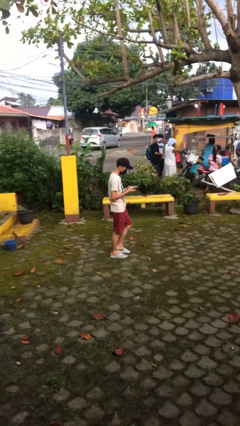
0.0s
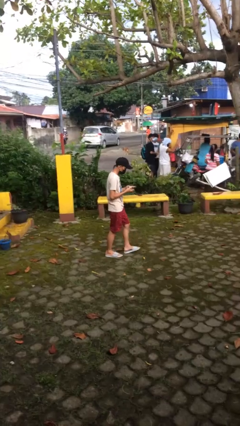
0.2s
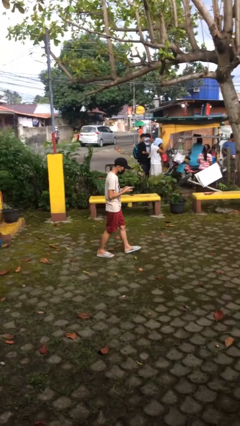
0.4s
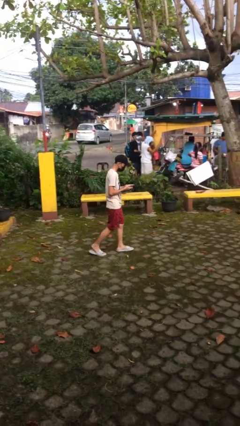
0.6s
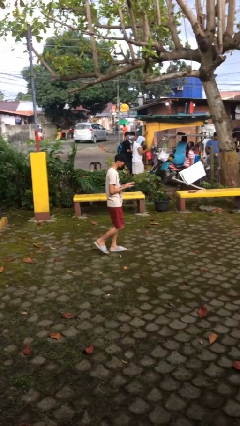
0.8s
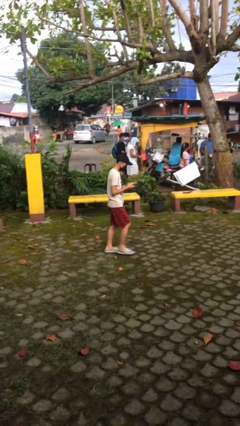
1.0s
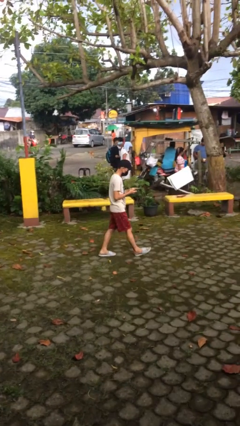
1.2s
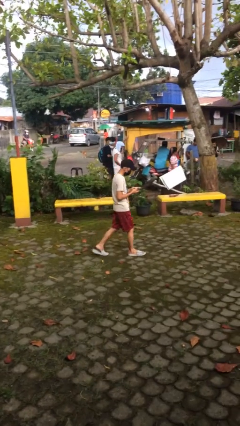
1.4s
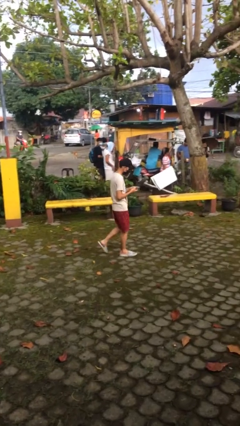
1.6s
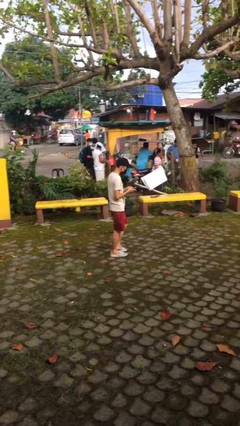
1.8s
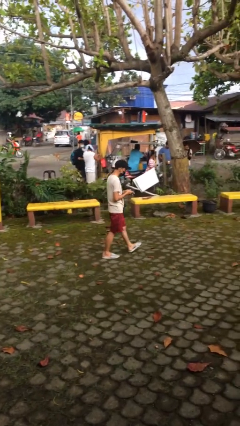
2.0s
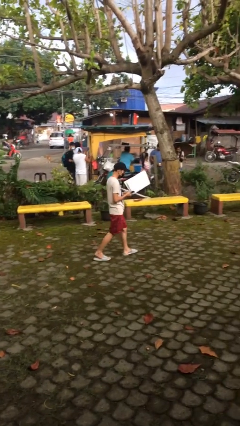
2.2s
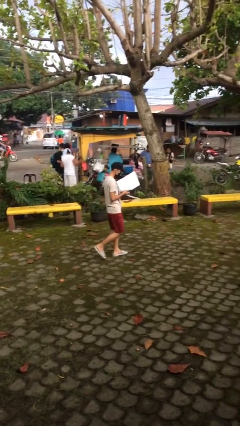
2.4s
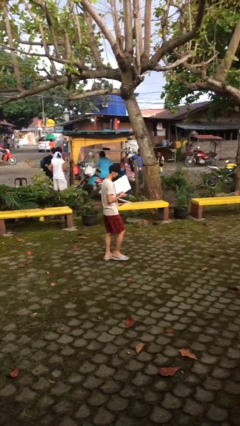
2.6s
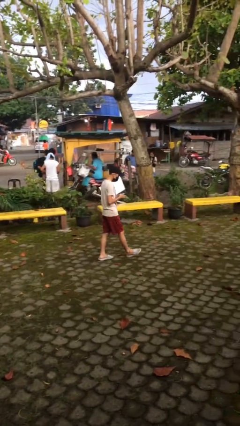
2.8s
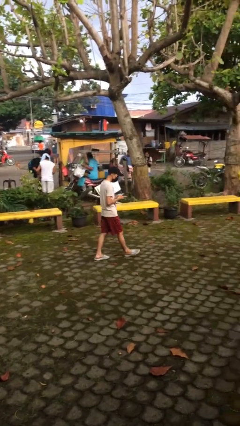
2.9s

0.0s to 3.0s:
person texts on phone

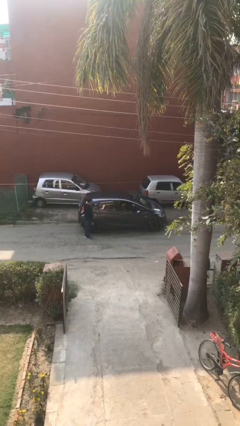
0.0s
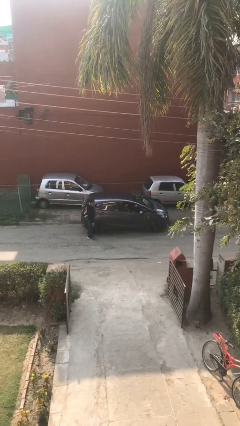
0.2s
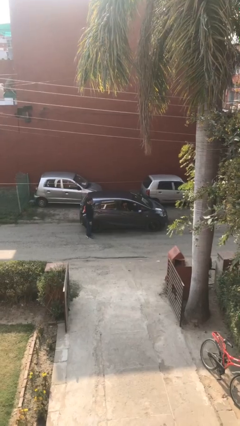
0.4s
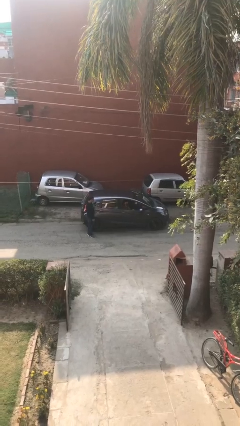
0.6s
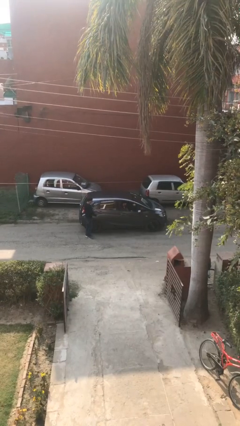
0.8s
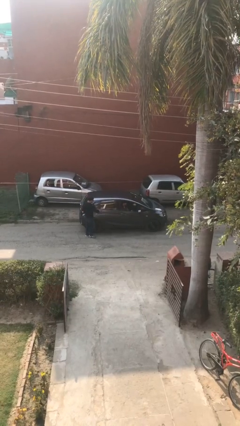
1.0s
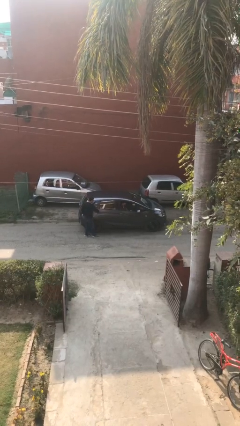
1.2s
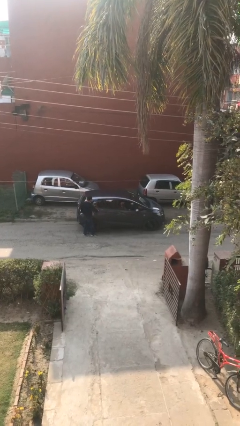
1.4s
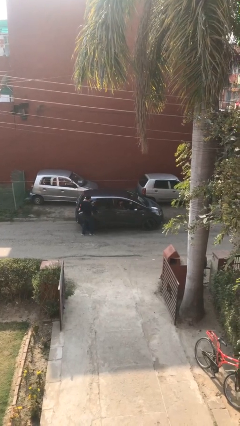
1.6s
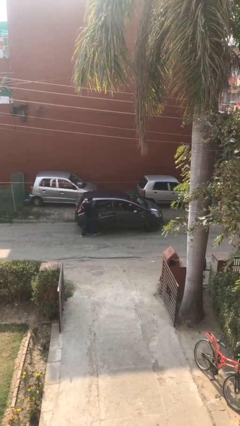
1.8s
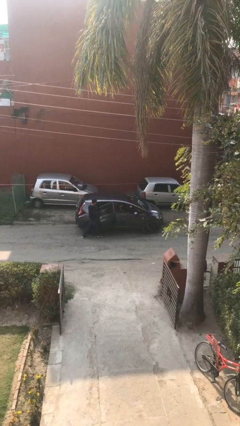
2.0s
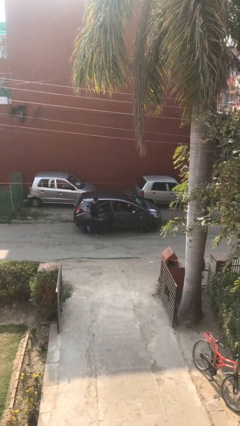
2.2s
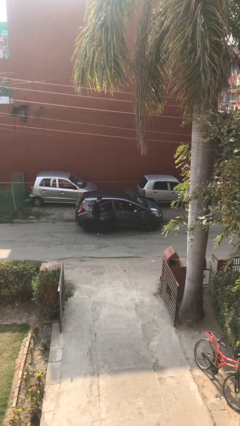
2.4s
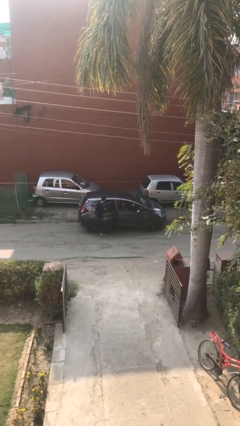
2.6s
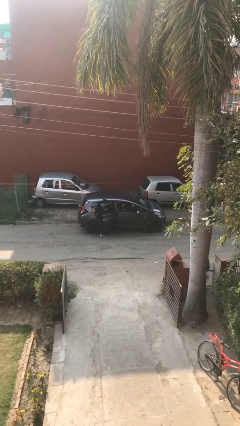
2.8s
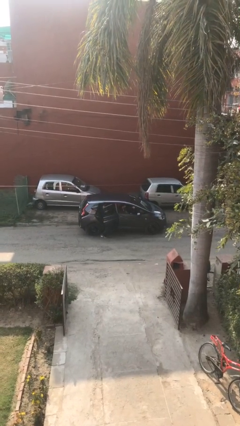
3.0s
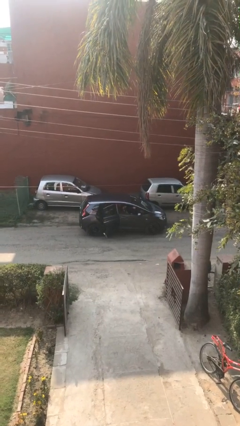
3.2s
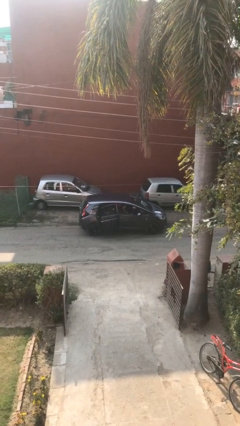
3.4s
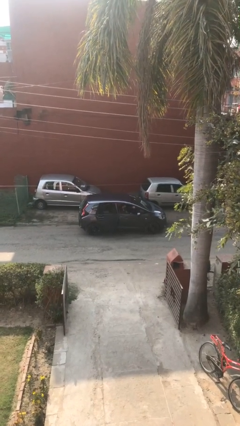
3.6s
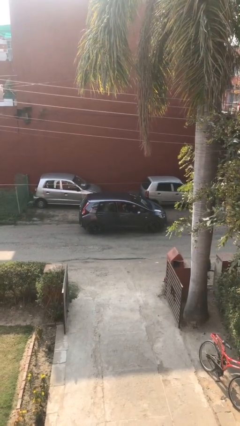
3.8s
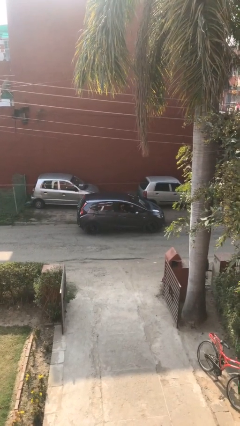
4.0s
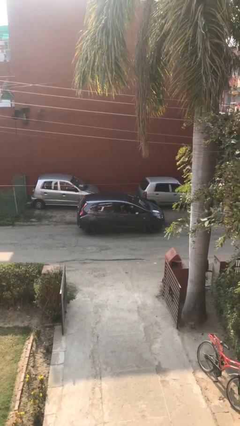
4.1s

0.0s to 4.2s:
car picks up person

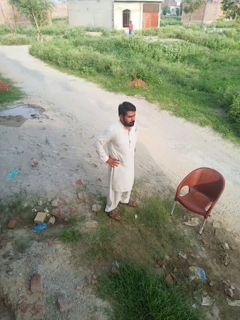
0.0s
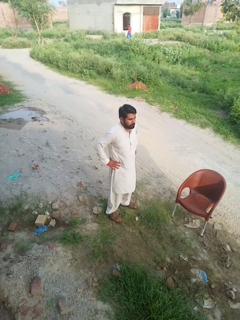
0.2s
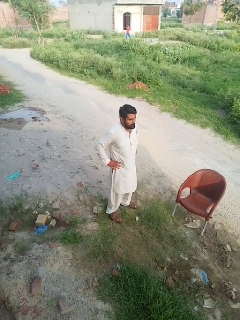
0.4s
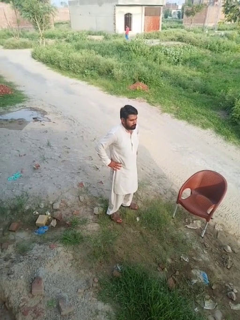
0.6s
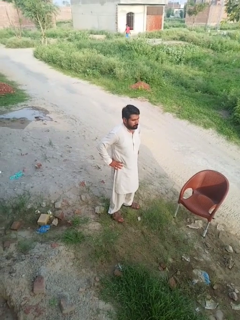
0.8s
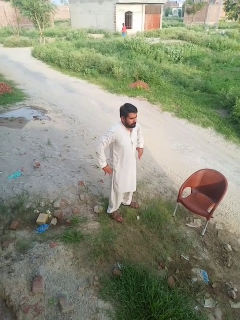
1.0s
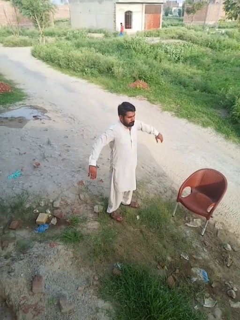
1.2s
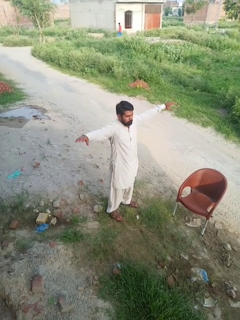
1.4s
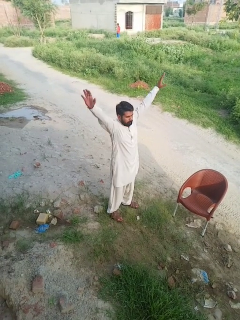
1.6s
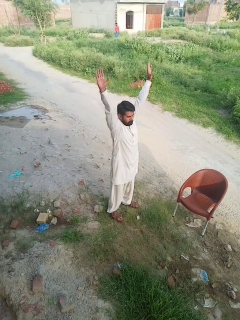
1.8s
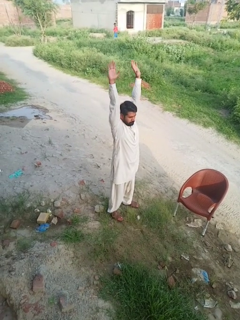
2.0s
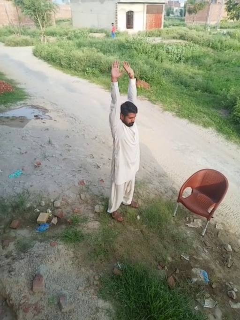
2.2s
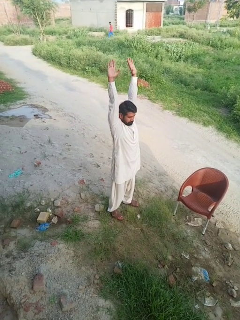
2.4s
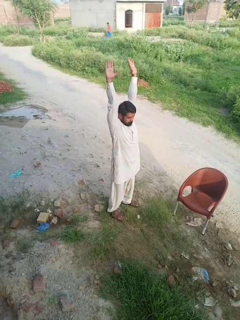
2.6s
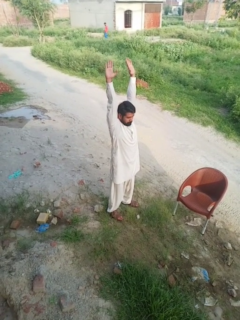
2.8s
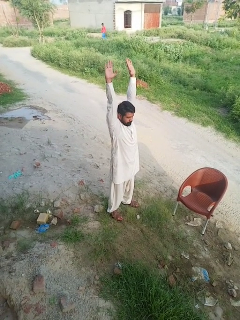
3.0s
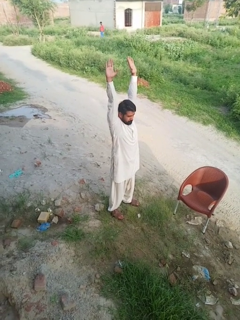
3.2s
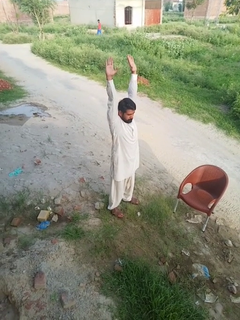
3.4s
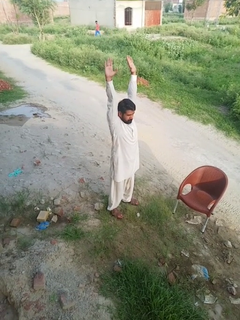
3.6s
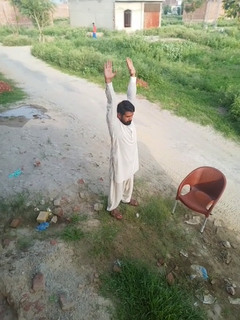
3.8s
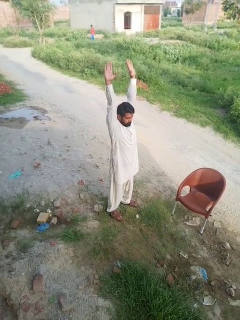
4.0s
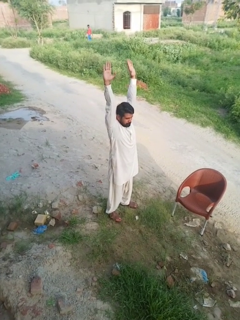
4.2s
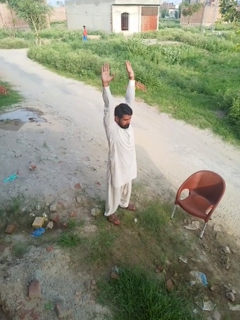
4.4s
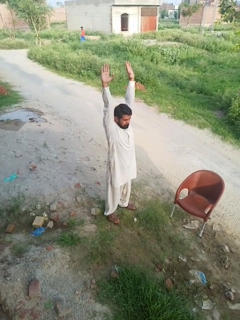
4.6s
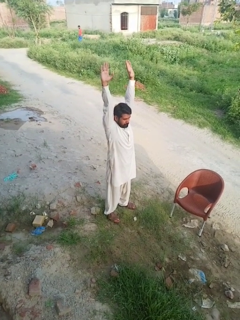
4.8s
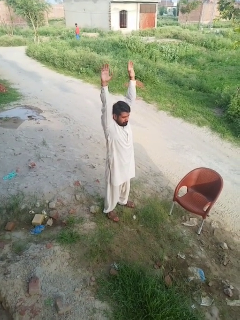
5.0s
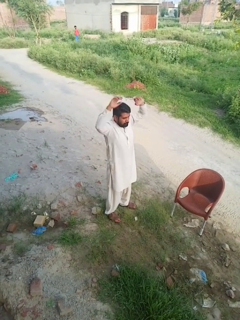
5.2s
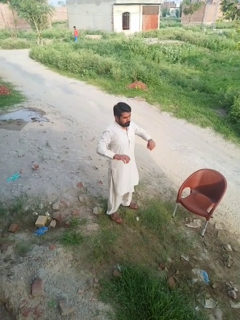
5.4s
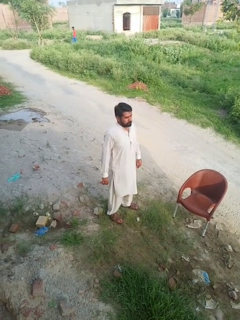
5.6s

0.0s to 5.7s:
person stretches arms over head

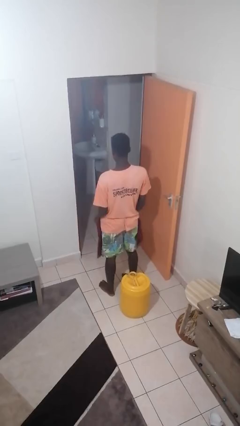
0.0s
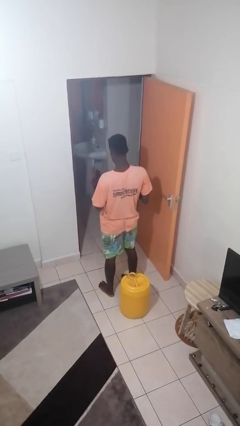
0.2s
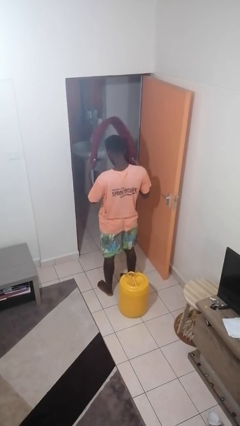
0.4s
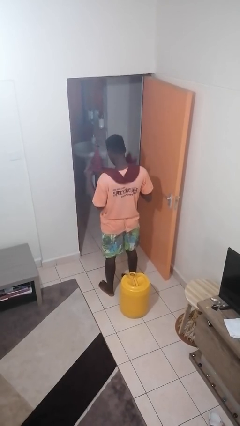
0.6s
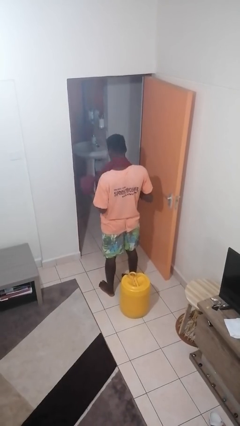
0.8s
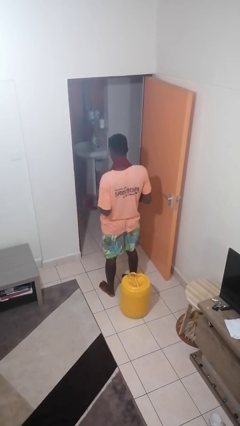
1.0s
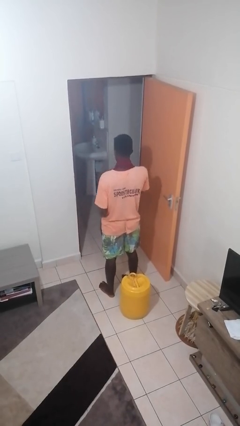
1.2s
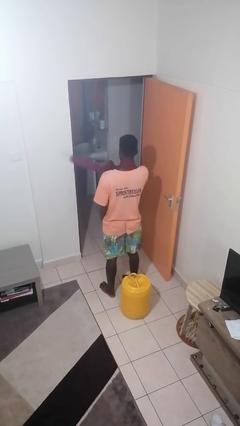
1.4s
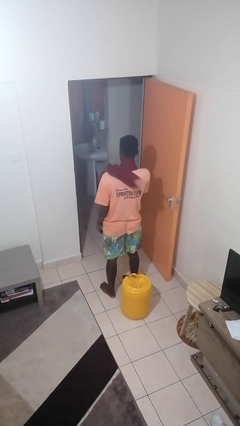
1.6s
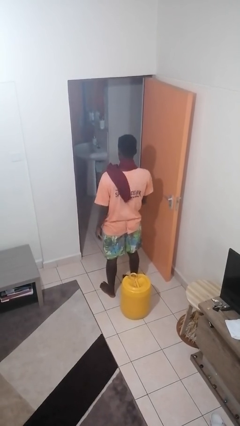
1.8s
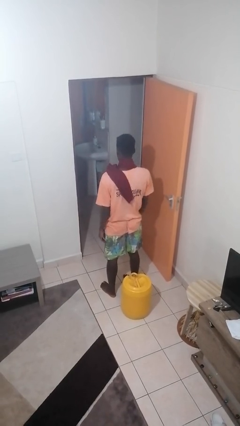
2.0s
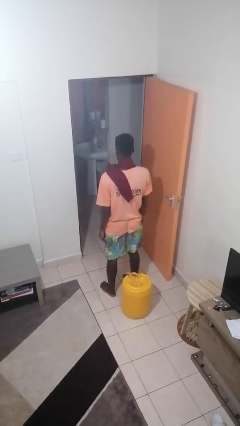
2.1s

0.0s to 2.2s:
person puts on scarf

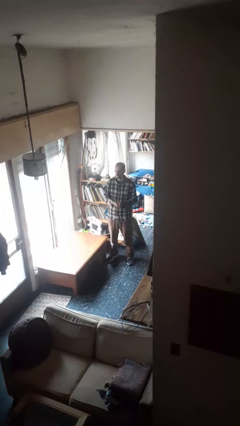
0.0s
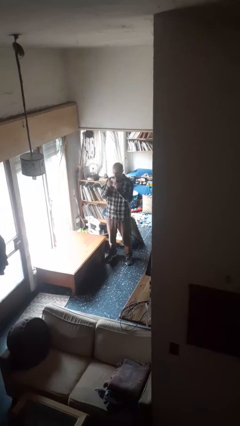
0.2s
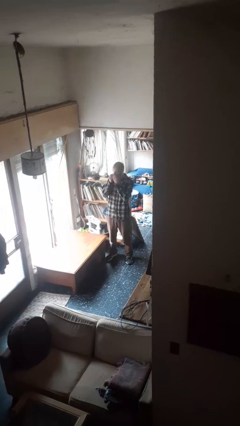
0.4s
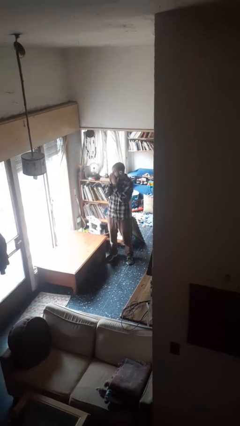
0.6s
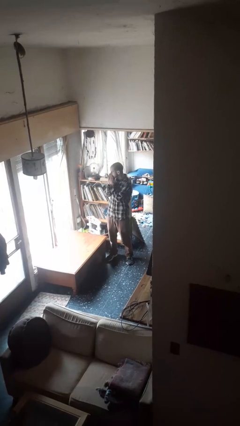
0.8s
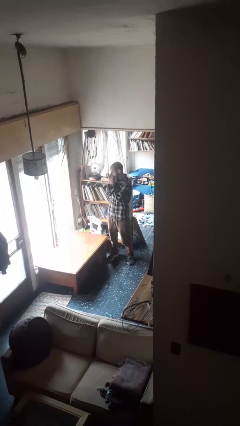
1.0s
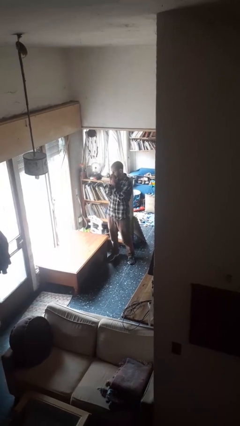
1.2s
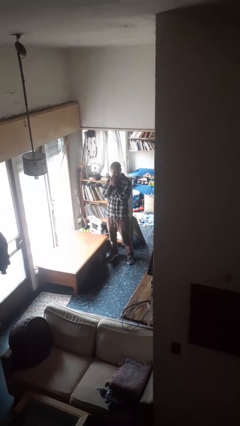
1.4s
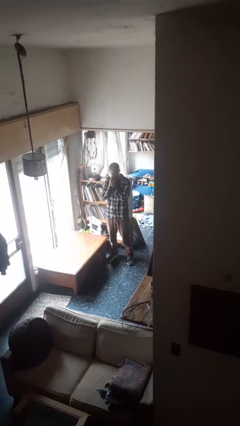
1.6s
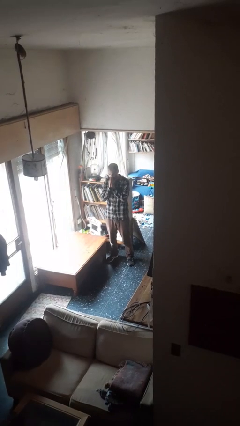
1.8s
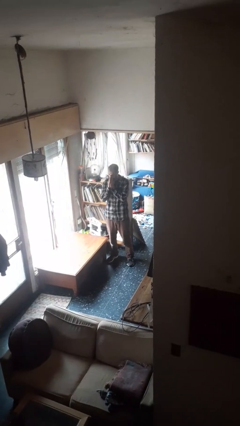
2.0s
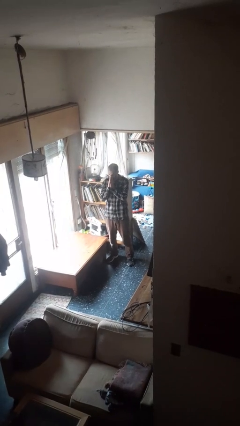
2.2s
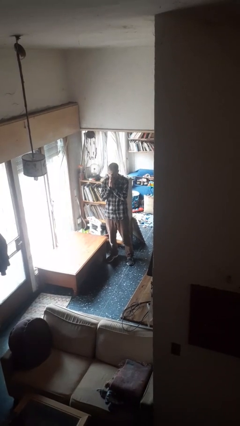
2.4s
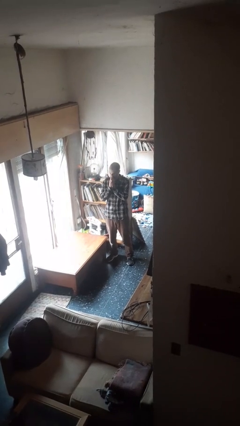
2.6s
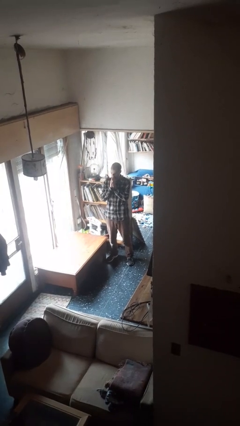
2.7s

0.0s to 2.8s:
person blows nose

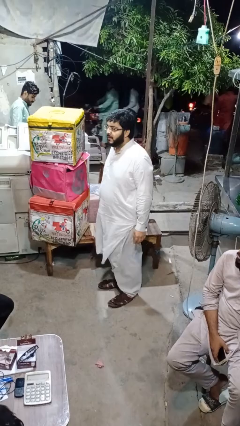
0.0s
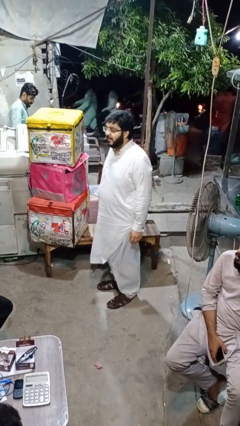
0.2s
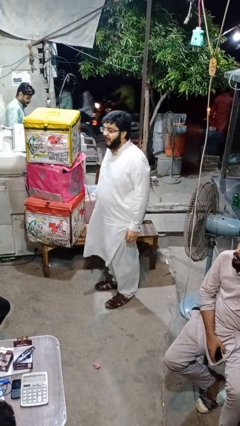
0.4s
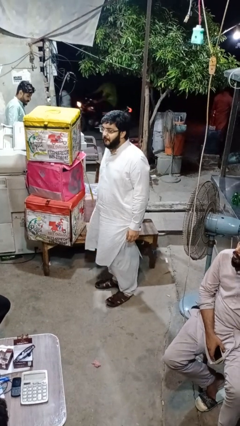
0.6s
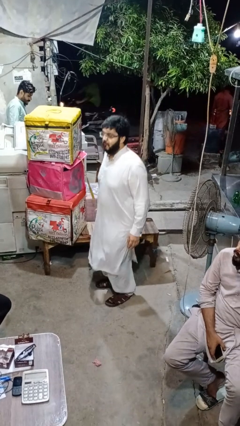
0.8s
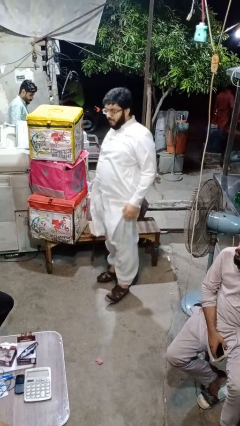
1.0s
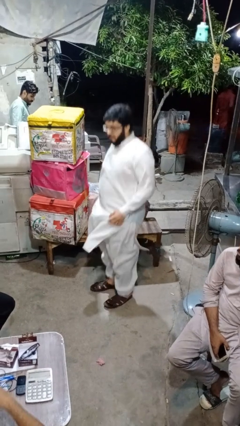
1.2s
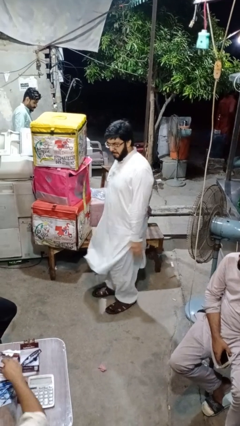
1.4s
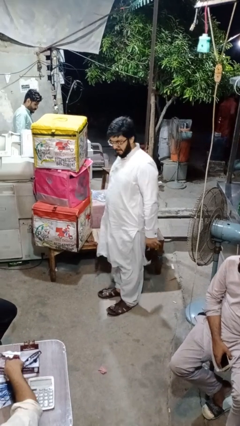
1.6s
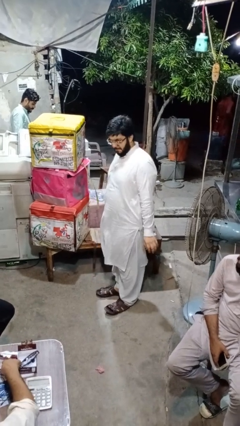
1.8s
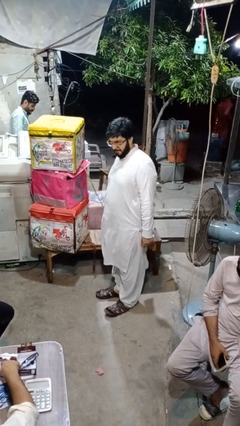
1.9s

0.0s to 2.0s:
person jumps
